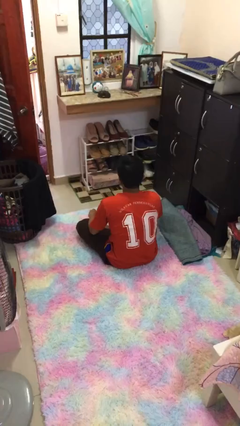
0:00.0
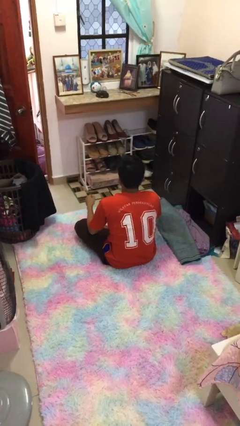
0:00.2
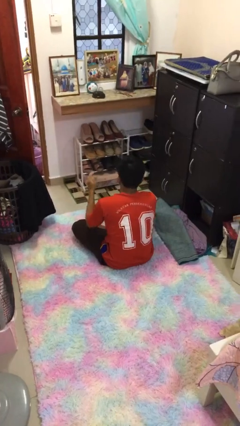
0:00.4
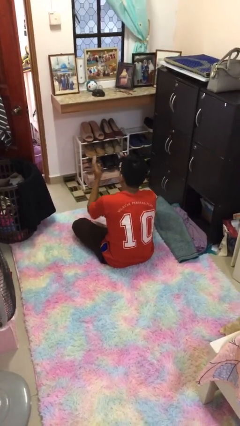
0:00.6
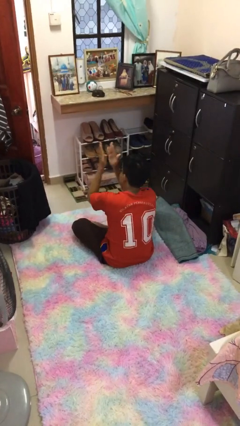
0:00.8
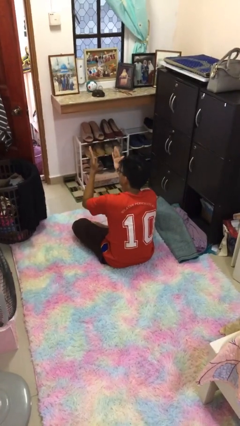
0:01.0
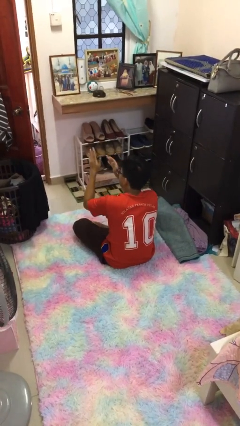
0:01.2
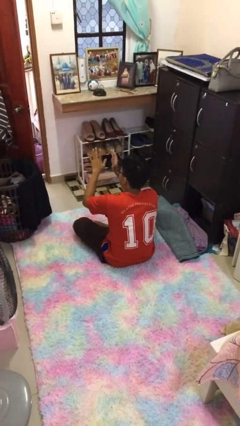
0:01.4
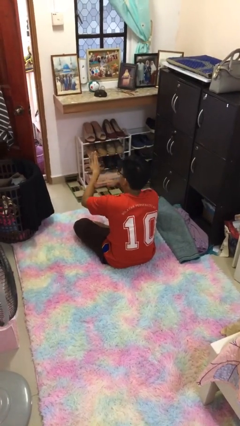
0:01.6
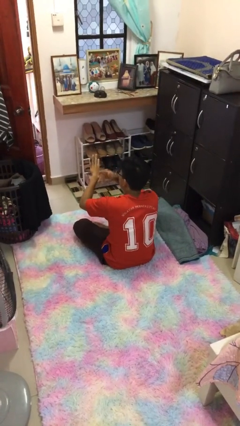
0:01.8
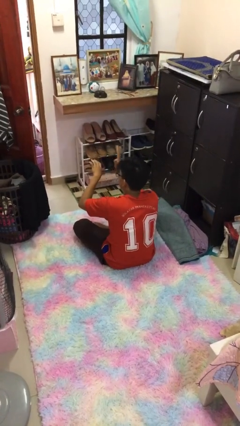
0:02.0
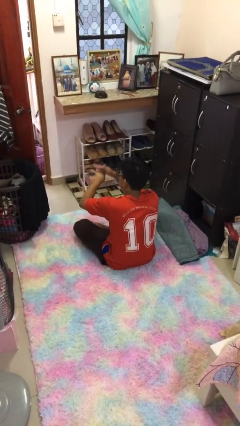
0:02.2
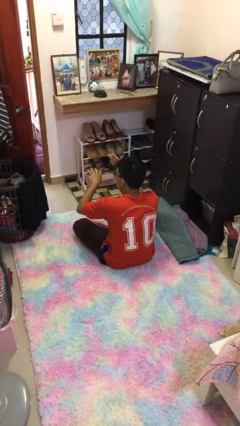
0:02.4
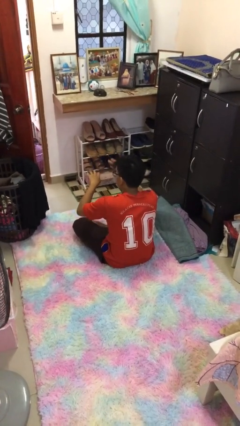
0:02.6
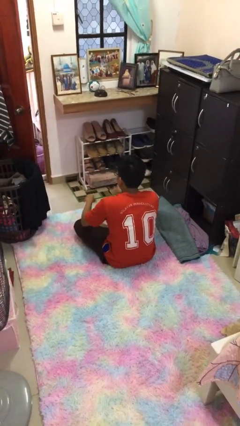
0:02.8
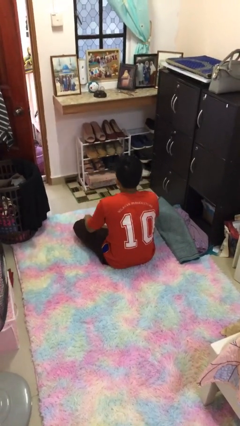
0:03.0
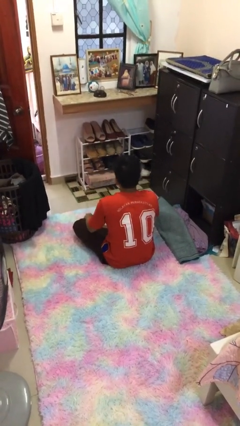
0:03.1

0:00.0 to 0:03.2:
person swats bug

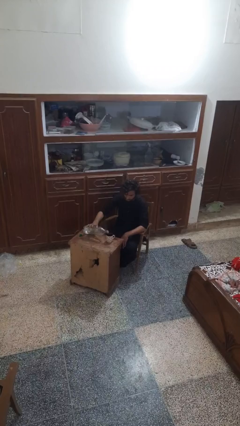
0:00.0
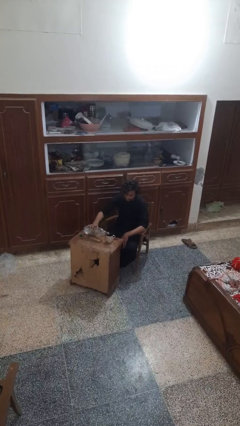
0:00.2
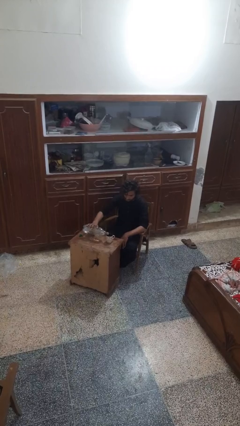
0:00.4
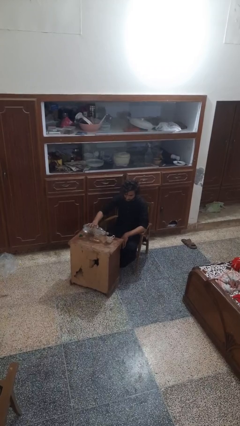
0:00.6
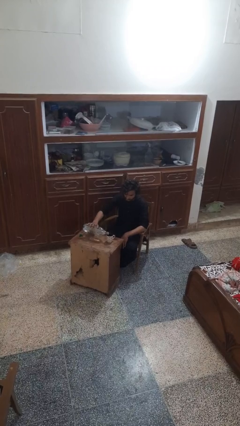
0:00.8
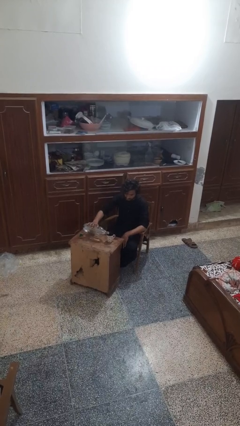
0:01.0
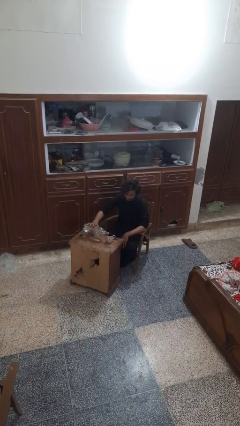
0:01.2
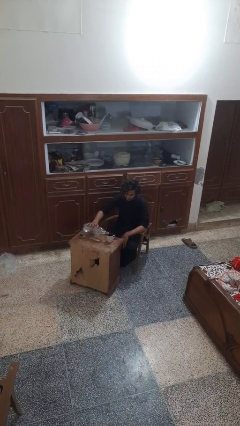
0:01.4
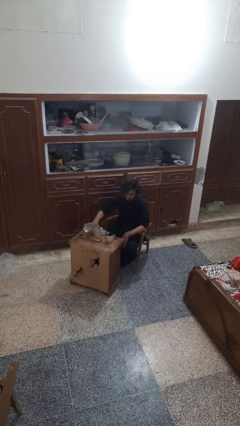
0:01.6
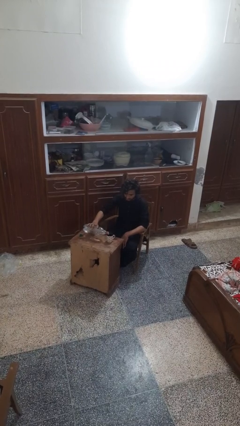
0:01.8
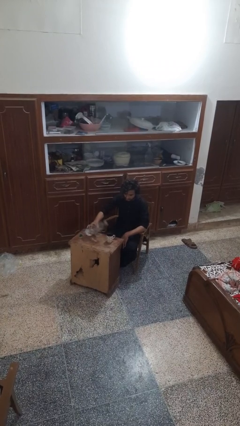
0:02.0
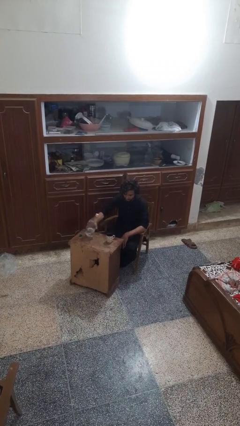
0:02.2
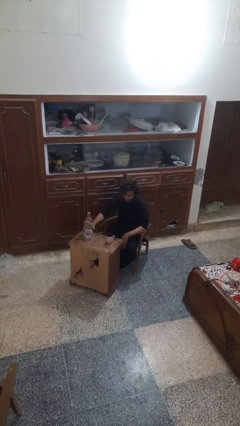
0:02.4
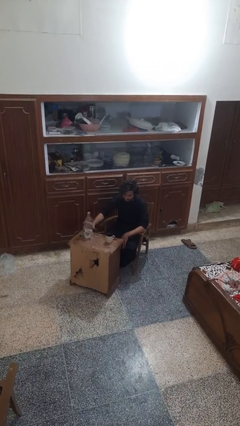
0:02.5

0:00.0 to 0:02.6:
person pours liquid into cup

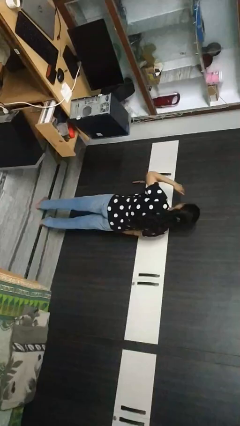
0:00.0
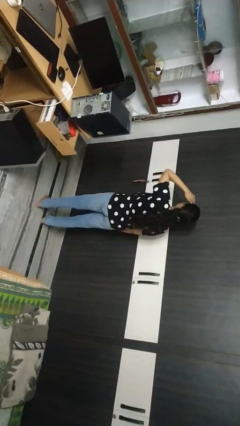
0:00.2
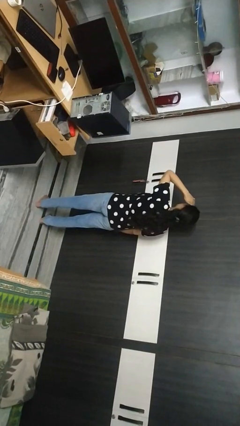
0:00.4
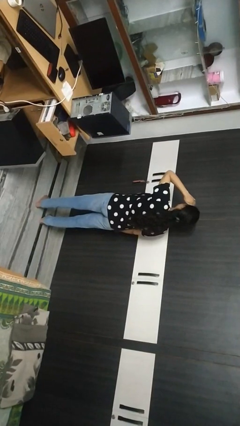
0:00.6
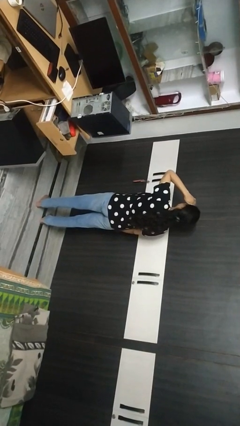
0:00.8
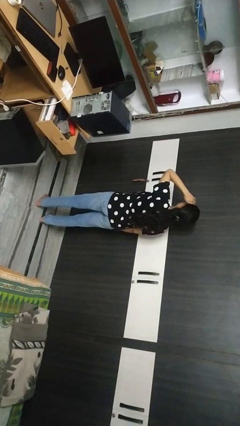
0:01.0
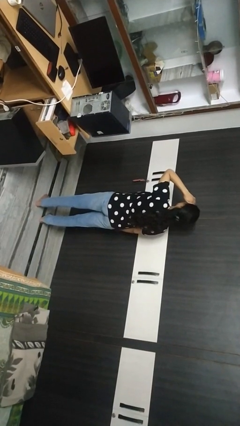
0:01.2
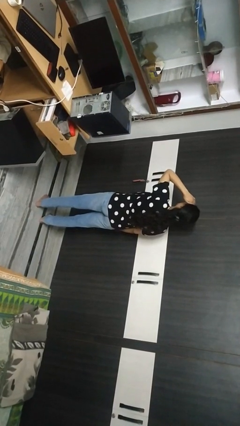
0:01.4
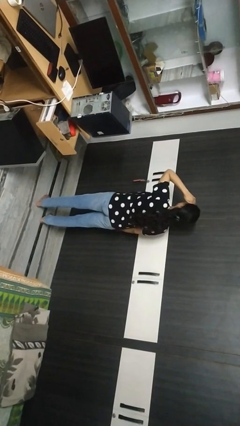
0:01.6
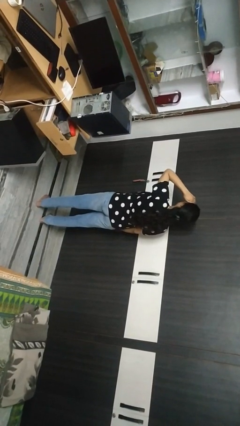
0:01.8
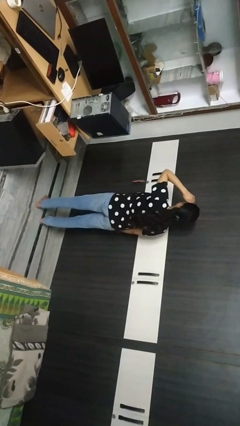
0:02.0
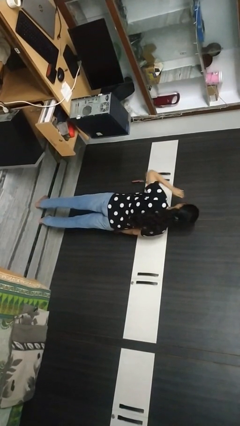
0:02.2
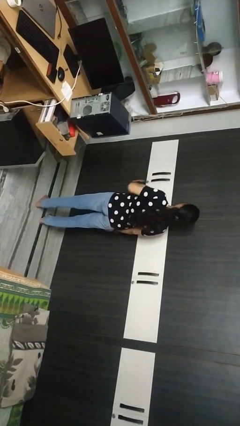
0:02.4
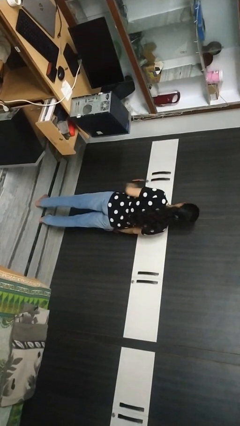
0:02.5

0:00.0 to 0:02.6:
person shades eyes

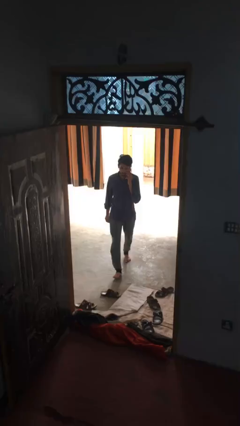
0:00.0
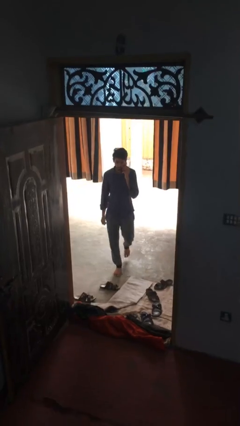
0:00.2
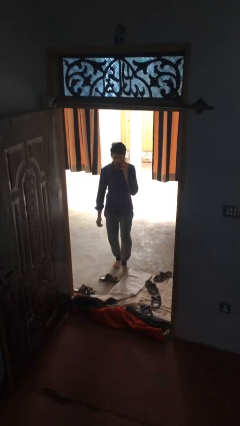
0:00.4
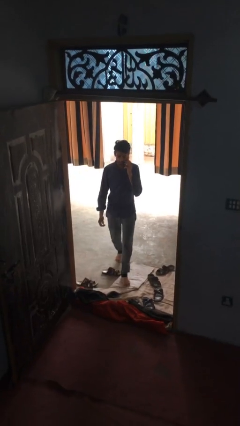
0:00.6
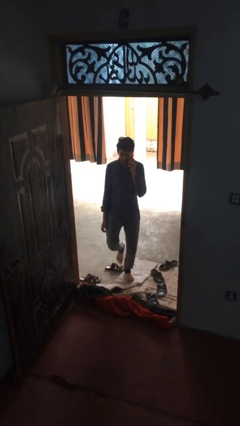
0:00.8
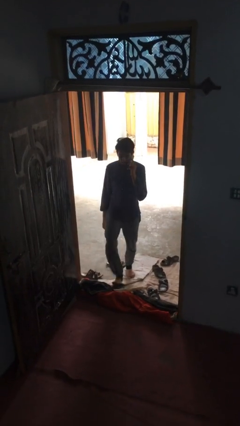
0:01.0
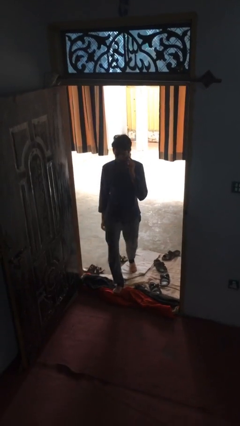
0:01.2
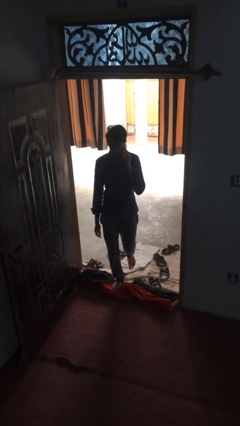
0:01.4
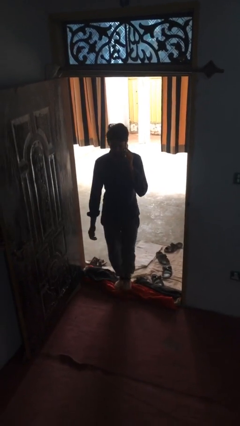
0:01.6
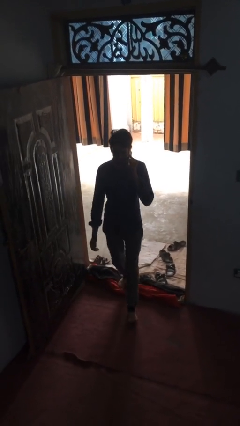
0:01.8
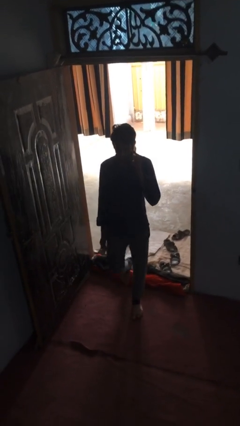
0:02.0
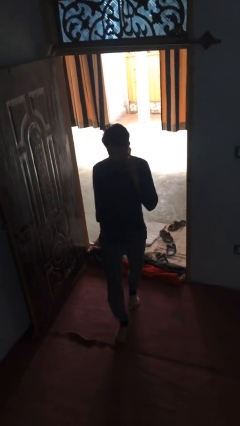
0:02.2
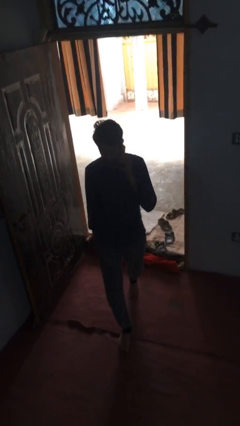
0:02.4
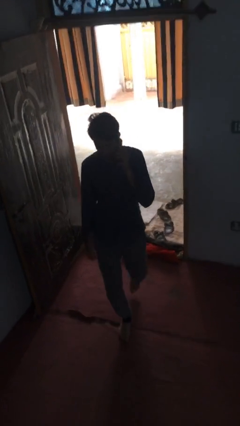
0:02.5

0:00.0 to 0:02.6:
person enters scene through structure

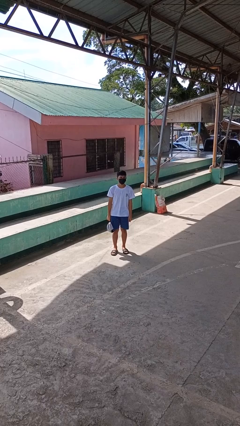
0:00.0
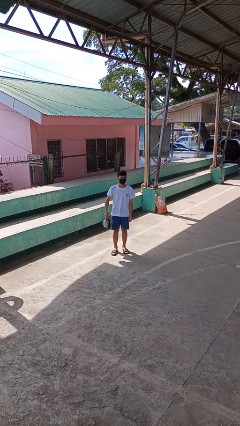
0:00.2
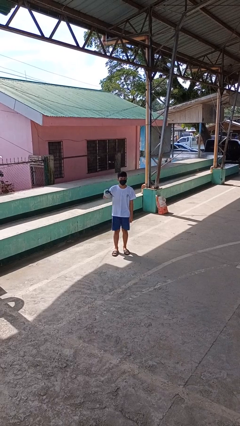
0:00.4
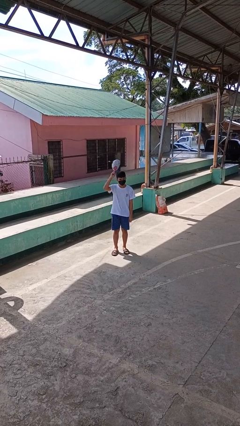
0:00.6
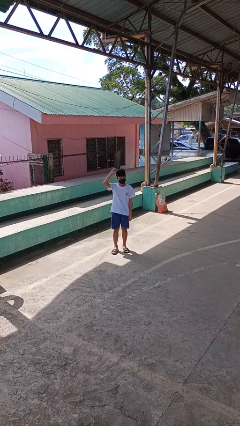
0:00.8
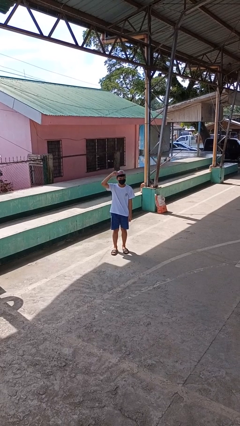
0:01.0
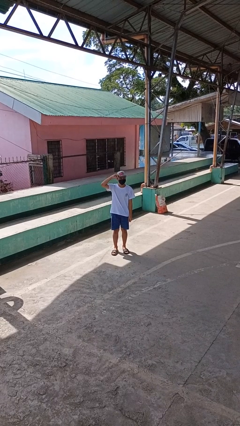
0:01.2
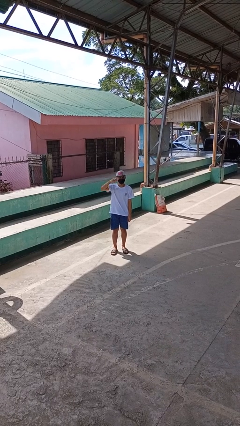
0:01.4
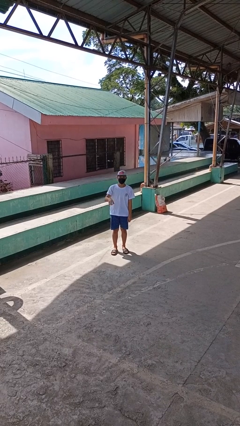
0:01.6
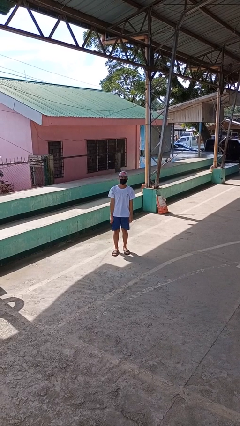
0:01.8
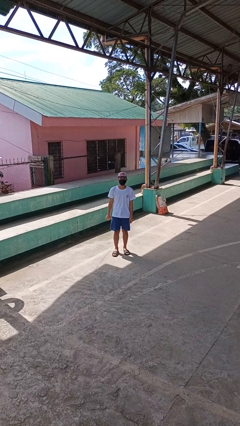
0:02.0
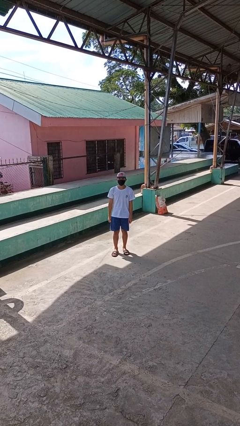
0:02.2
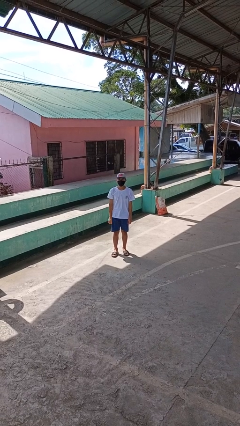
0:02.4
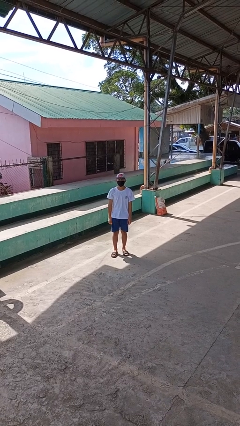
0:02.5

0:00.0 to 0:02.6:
person puts on hat

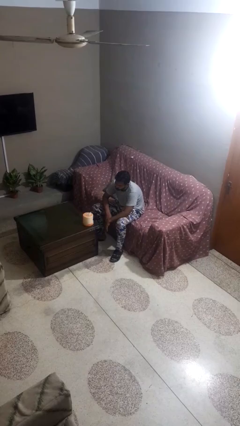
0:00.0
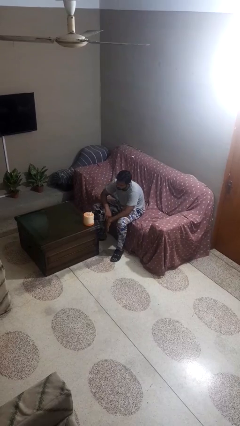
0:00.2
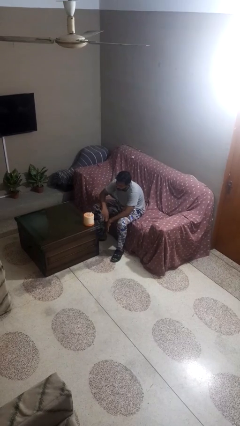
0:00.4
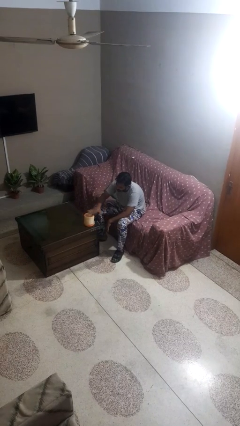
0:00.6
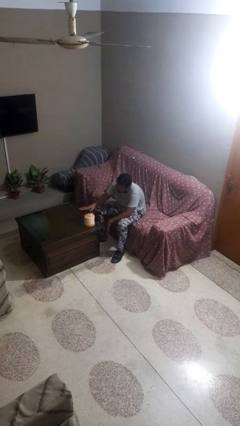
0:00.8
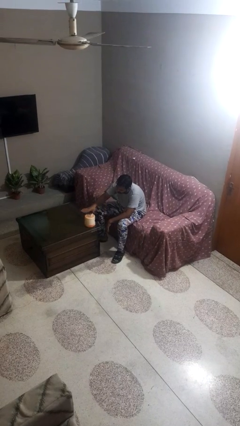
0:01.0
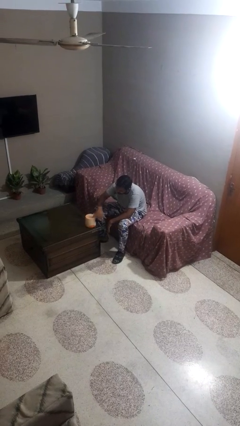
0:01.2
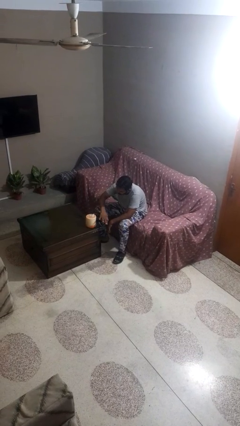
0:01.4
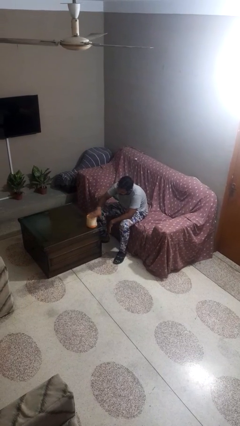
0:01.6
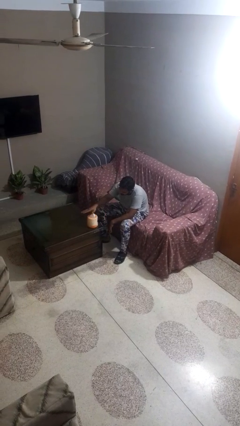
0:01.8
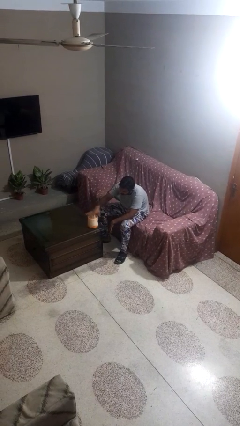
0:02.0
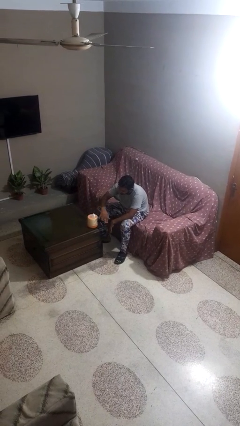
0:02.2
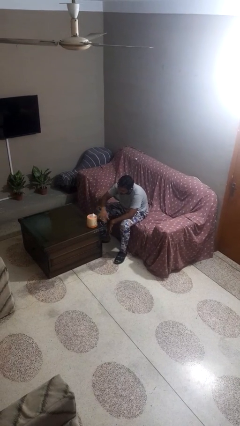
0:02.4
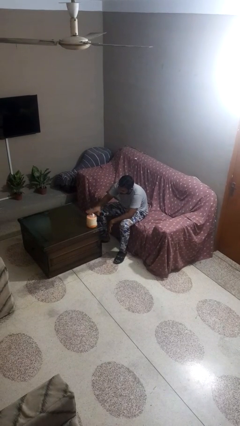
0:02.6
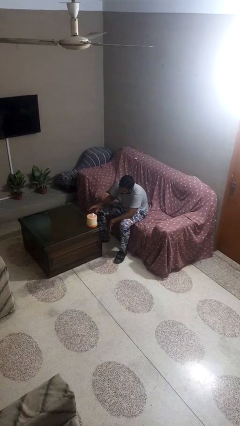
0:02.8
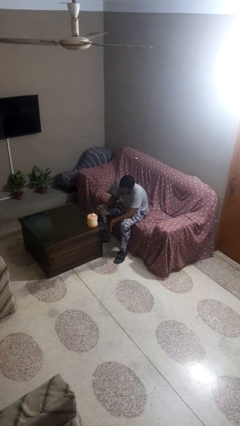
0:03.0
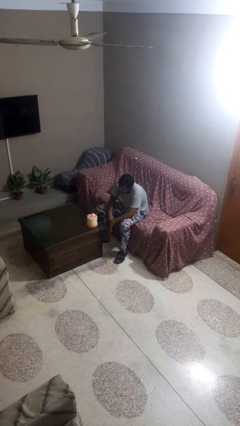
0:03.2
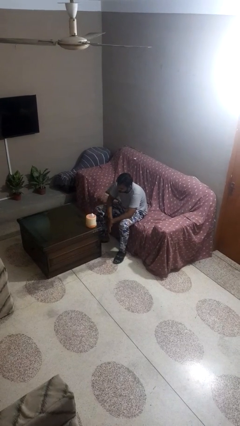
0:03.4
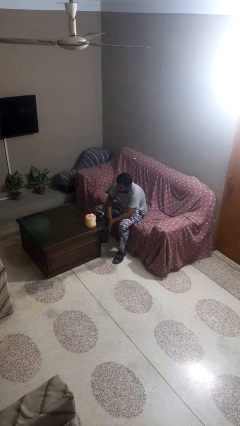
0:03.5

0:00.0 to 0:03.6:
person waves hand over object
